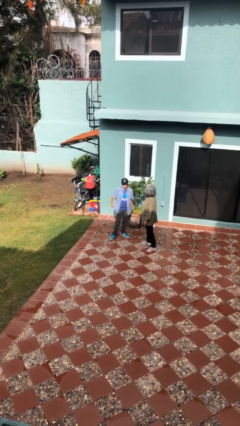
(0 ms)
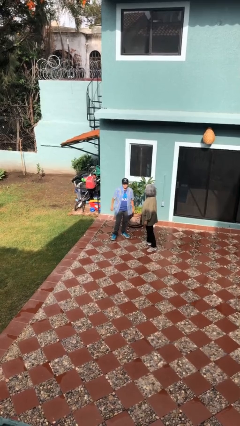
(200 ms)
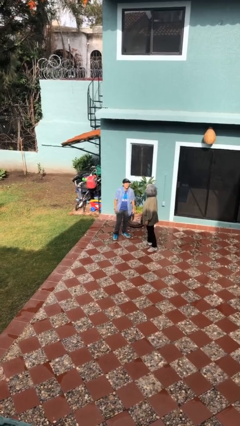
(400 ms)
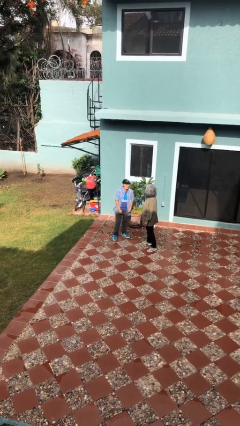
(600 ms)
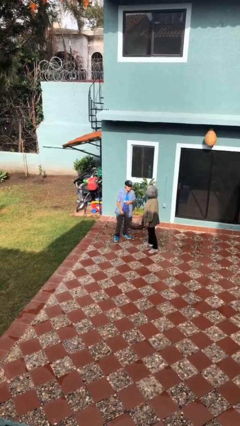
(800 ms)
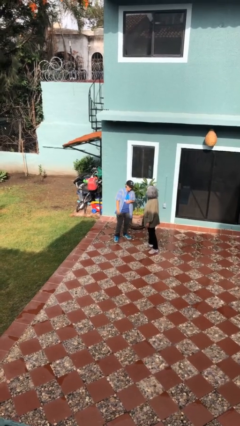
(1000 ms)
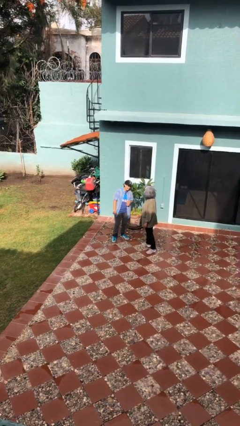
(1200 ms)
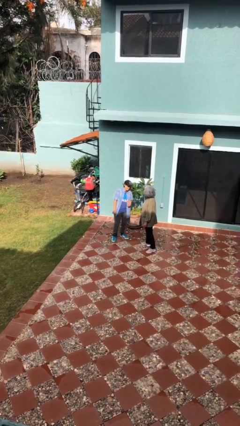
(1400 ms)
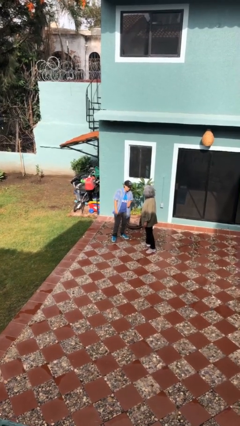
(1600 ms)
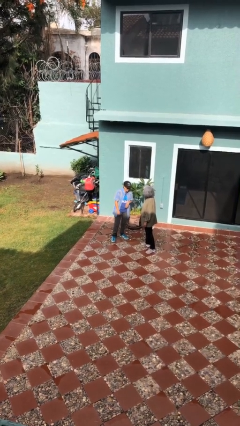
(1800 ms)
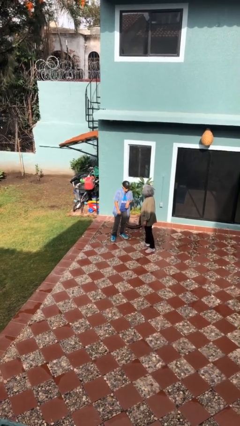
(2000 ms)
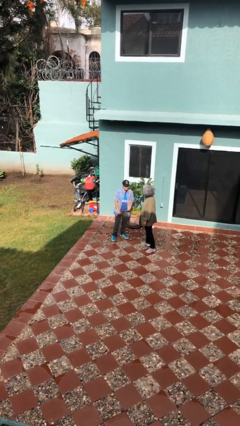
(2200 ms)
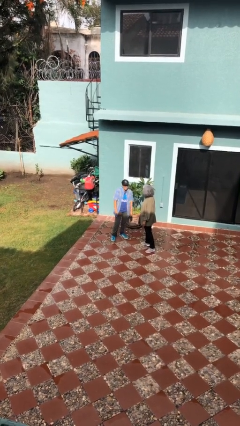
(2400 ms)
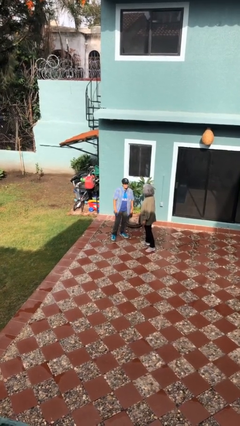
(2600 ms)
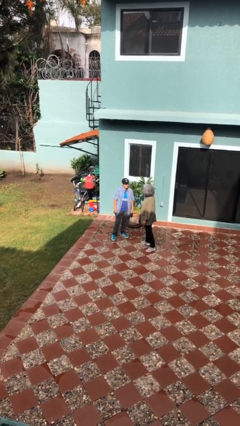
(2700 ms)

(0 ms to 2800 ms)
person laughs with person

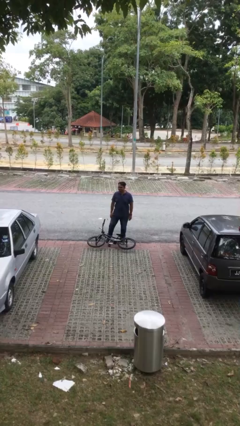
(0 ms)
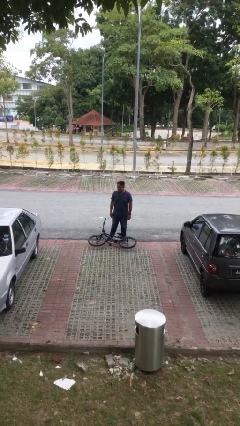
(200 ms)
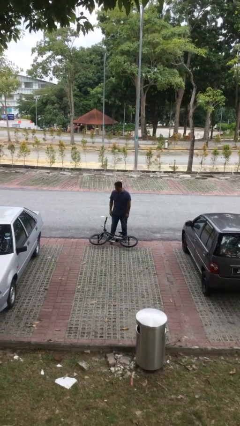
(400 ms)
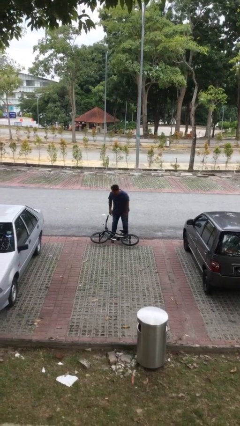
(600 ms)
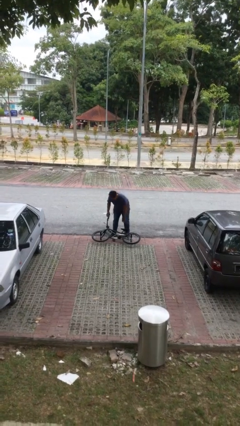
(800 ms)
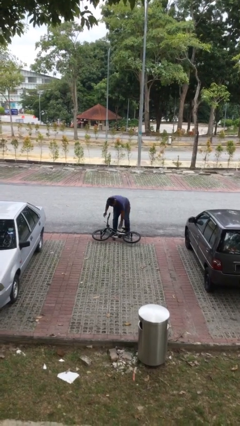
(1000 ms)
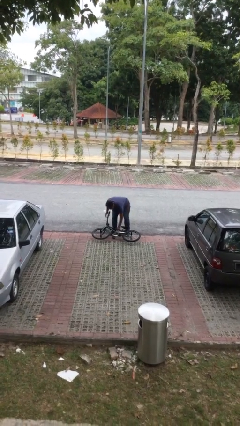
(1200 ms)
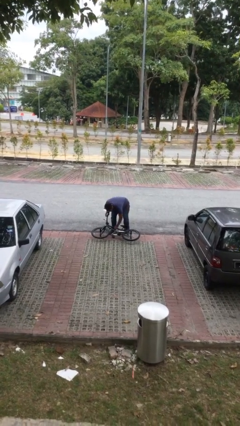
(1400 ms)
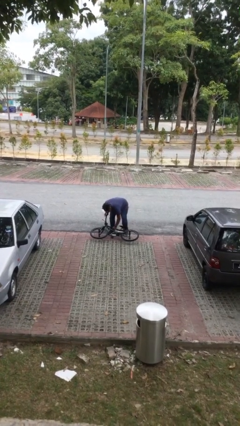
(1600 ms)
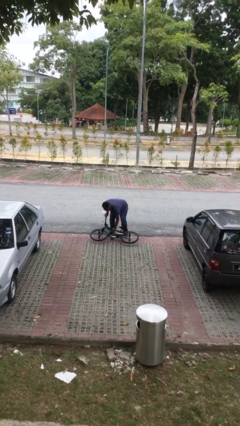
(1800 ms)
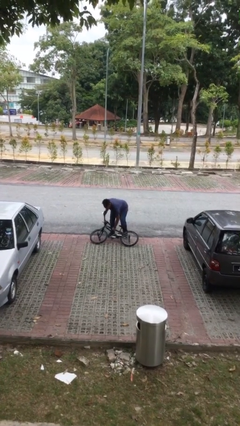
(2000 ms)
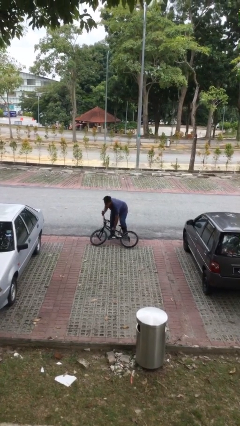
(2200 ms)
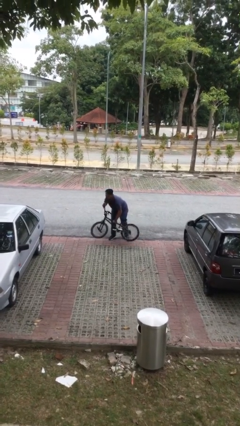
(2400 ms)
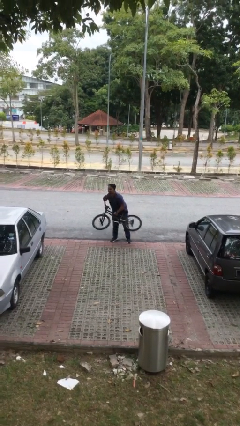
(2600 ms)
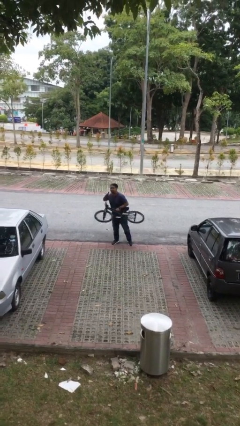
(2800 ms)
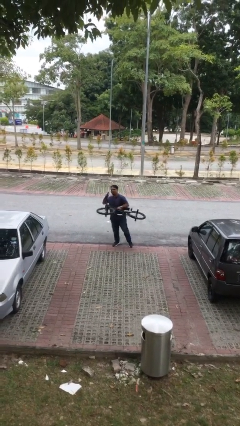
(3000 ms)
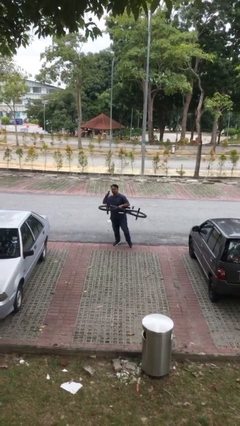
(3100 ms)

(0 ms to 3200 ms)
person picks up object from floor

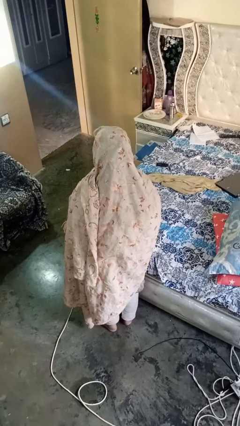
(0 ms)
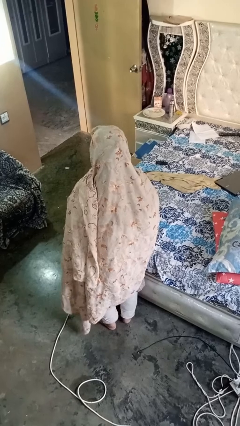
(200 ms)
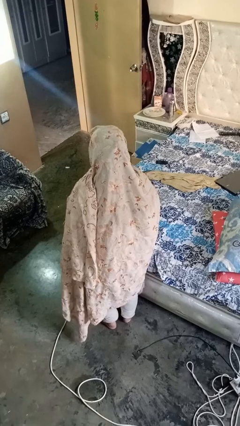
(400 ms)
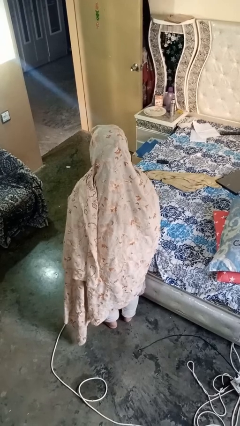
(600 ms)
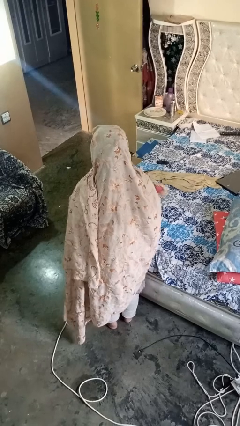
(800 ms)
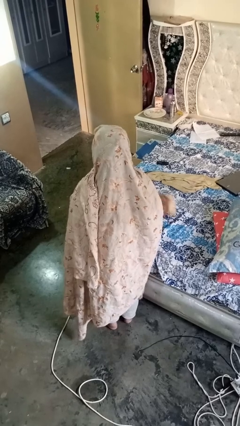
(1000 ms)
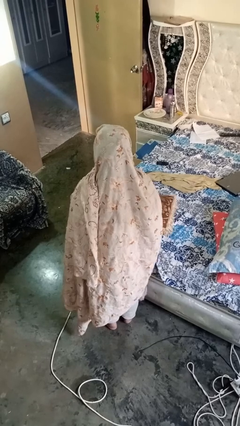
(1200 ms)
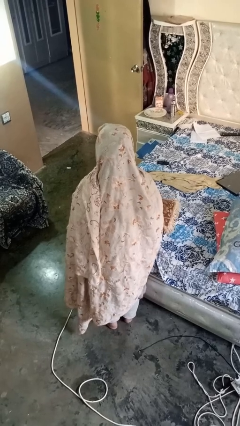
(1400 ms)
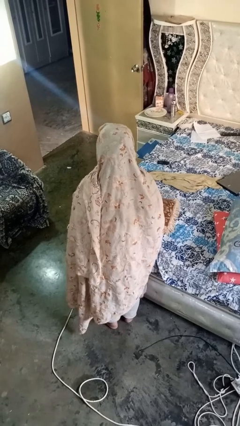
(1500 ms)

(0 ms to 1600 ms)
person puts down object on bed

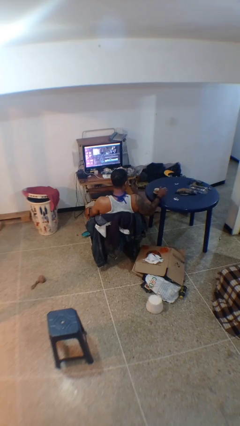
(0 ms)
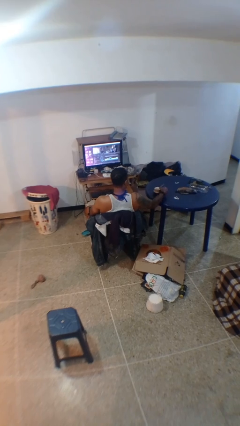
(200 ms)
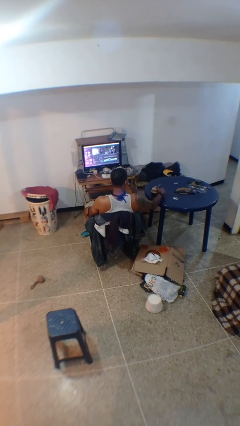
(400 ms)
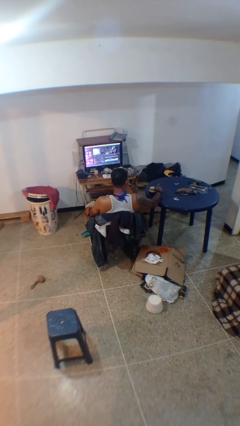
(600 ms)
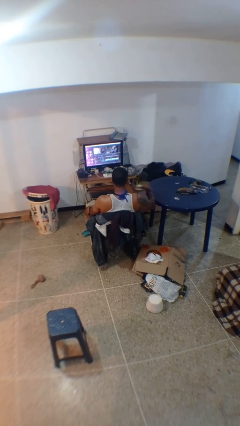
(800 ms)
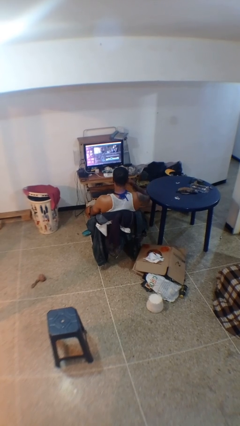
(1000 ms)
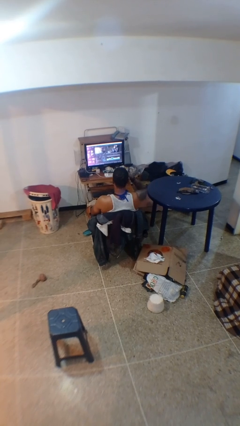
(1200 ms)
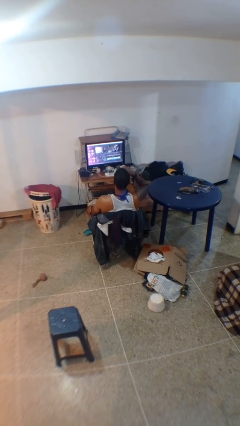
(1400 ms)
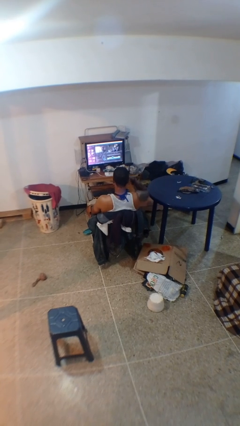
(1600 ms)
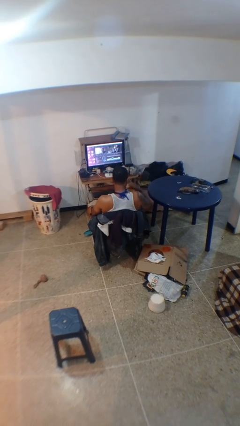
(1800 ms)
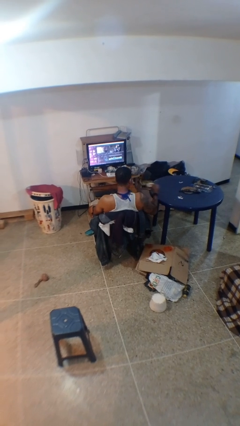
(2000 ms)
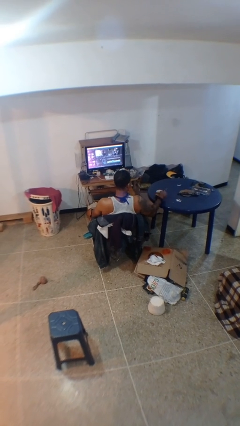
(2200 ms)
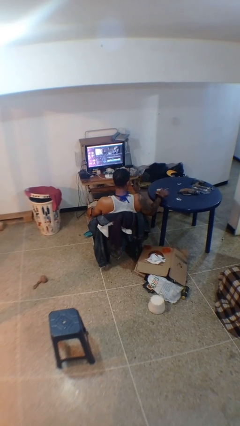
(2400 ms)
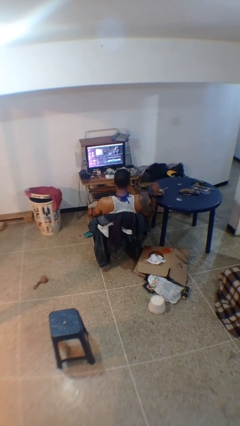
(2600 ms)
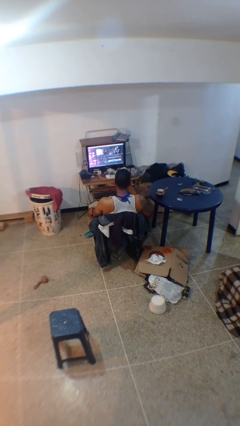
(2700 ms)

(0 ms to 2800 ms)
person drinks from mug

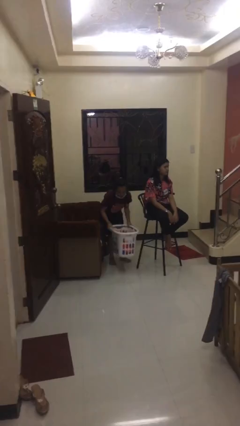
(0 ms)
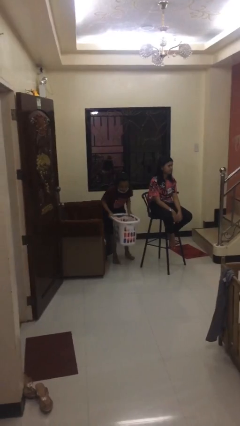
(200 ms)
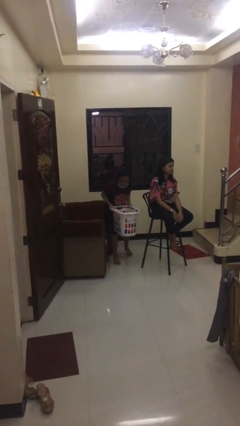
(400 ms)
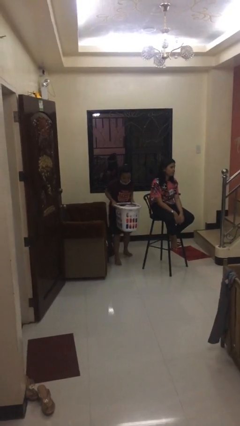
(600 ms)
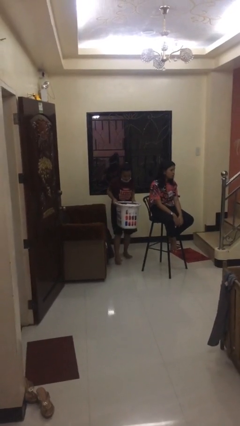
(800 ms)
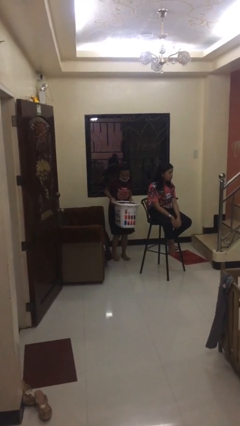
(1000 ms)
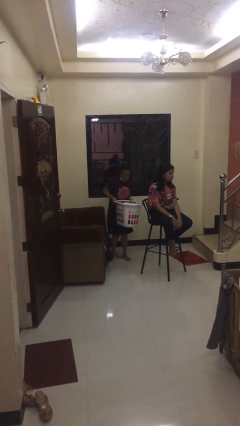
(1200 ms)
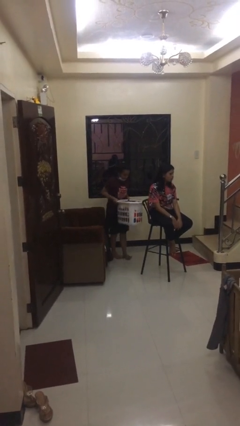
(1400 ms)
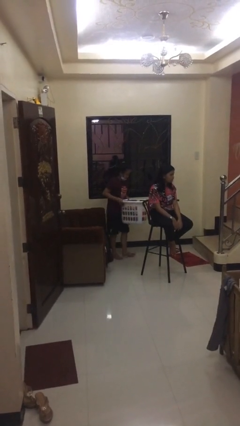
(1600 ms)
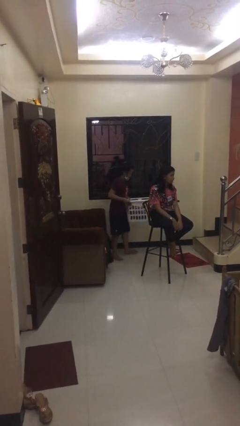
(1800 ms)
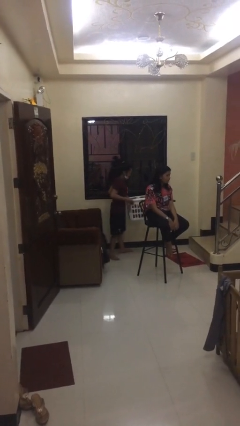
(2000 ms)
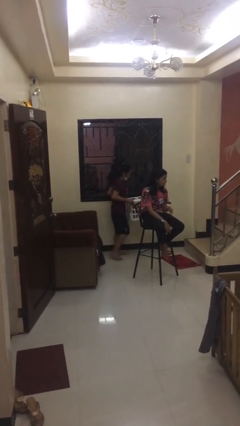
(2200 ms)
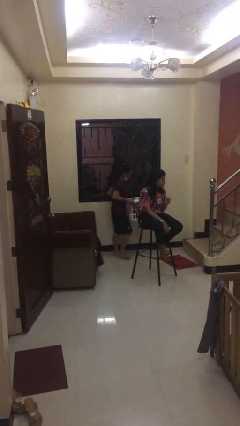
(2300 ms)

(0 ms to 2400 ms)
person steals object from person

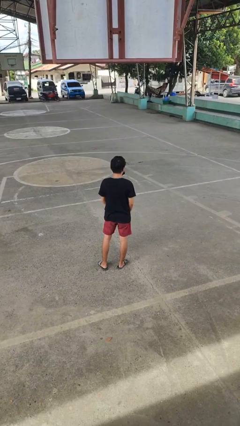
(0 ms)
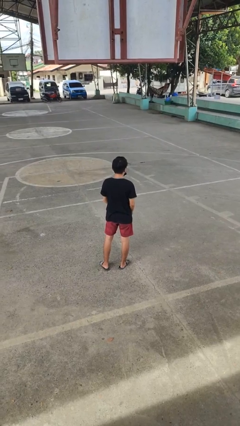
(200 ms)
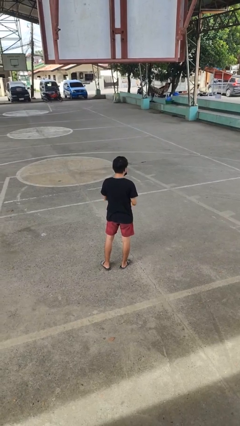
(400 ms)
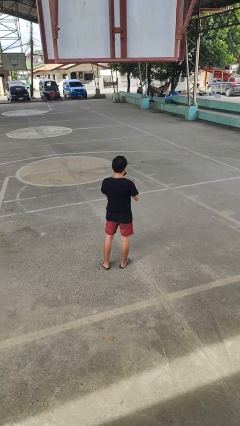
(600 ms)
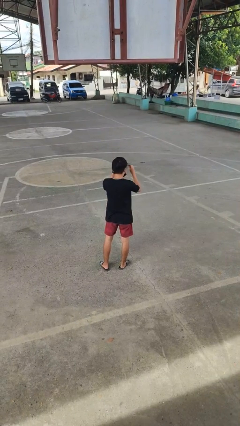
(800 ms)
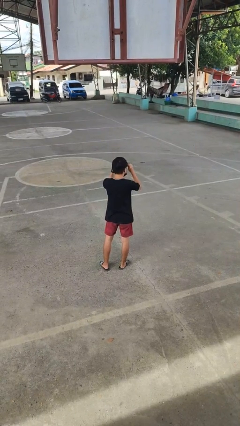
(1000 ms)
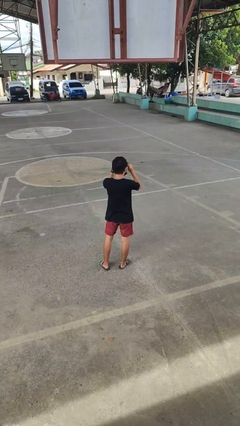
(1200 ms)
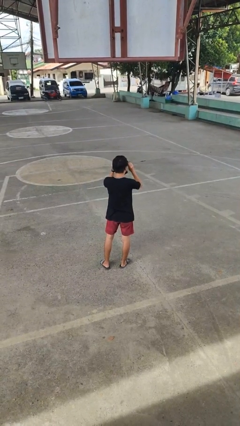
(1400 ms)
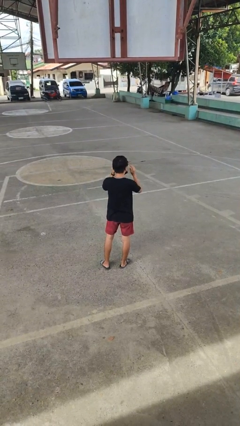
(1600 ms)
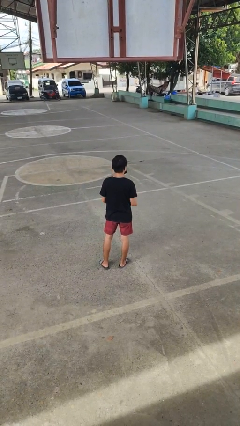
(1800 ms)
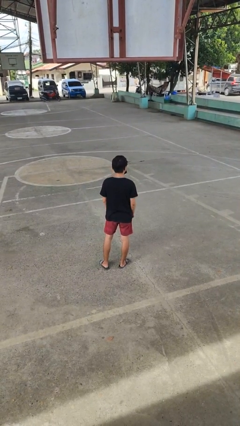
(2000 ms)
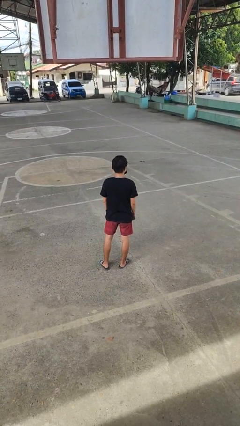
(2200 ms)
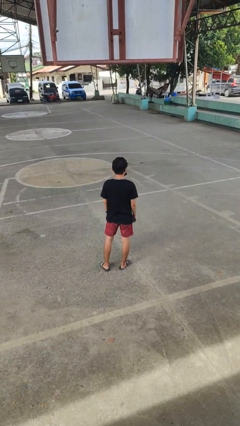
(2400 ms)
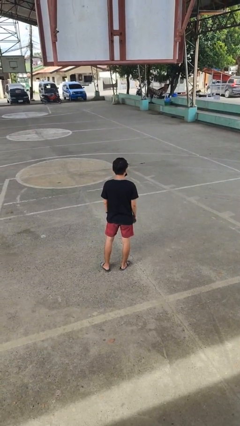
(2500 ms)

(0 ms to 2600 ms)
person puts on glasses

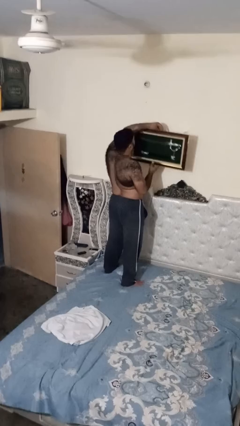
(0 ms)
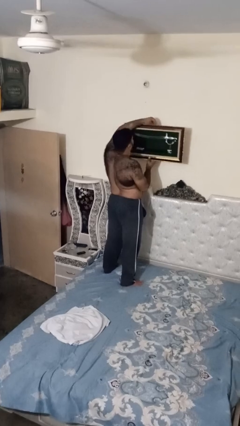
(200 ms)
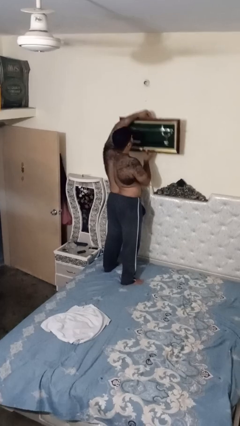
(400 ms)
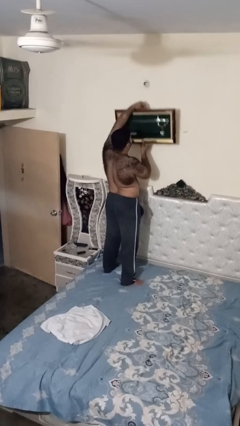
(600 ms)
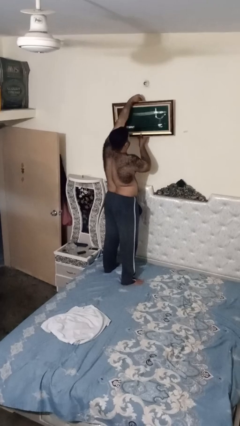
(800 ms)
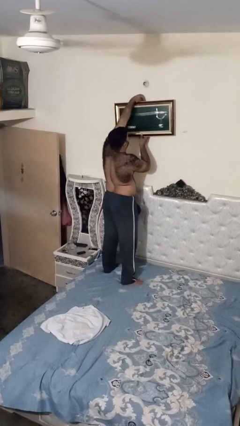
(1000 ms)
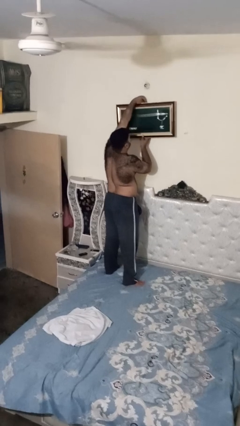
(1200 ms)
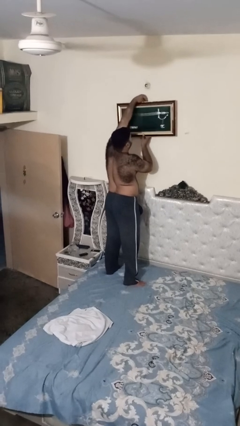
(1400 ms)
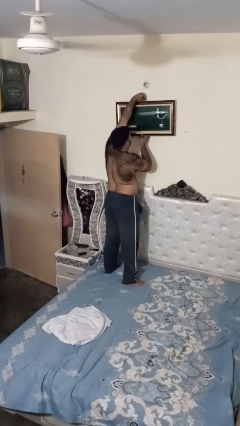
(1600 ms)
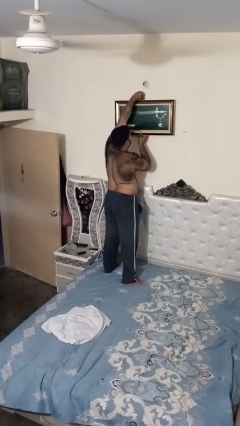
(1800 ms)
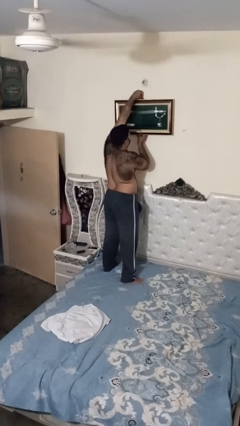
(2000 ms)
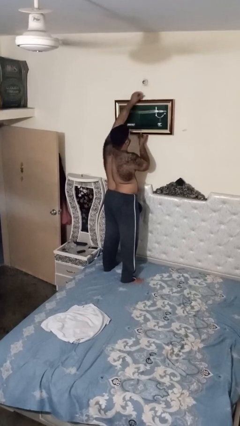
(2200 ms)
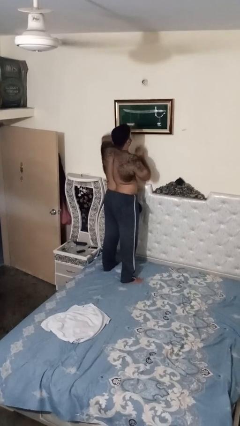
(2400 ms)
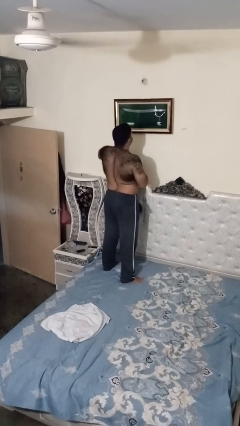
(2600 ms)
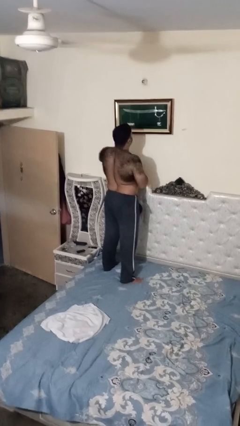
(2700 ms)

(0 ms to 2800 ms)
person puts up picture frame
